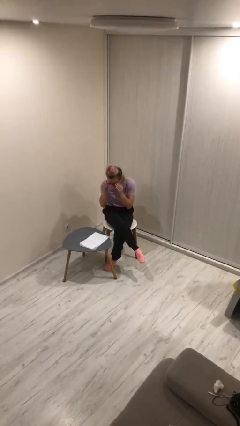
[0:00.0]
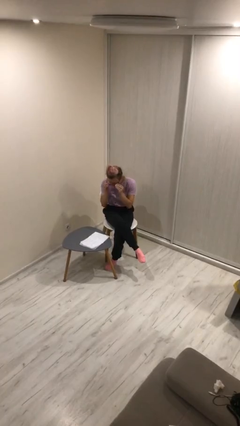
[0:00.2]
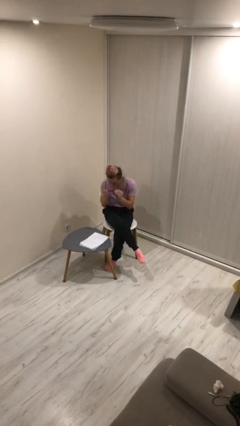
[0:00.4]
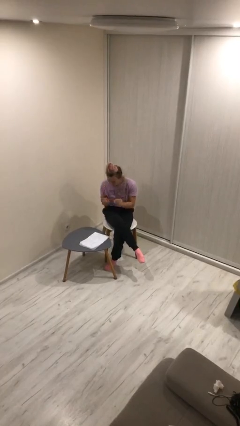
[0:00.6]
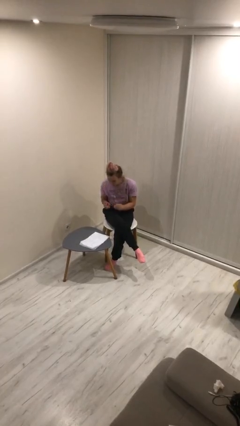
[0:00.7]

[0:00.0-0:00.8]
person takes off glasses

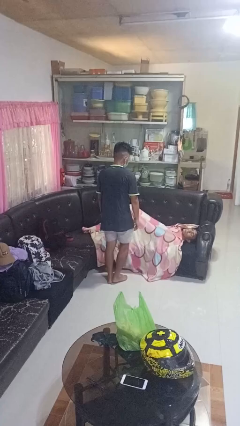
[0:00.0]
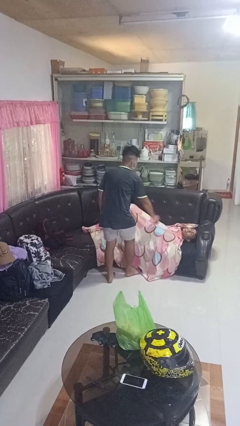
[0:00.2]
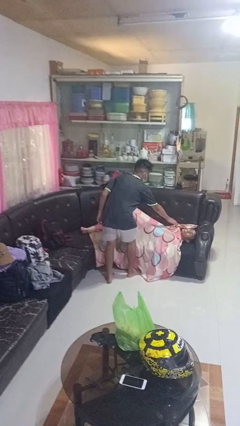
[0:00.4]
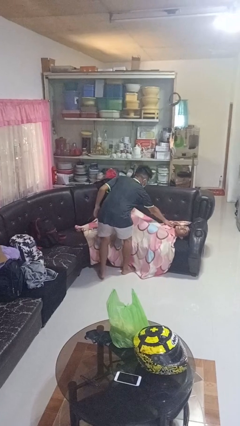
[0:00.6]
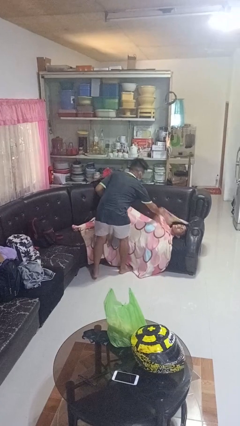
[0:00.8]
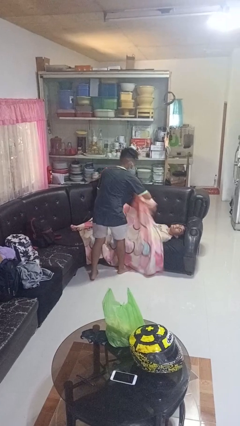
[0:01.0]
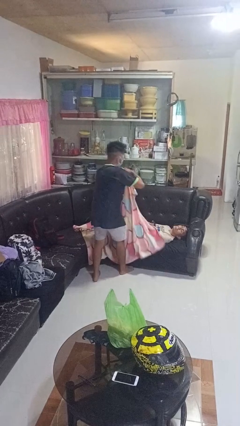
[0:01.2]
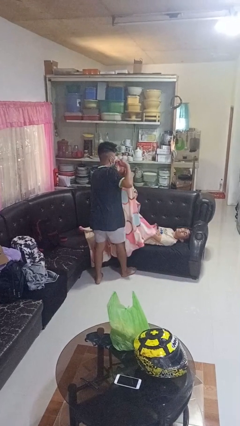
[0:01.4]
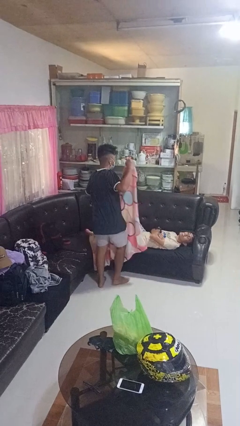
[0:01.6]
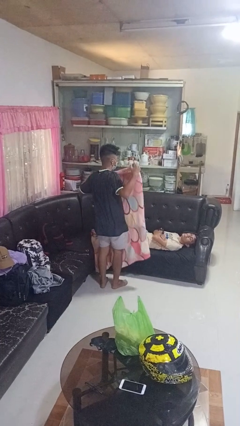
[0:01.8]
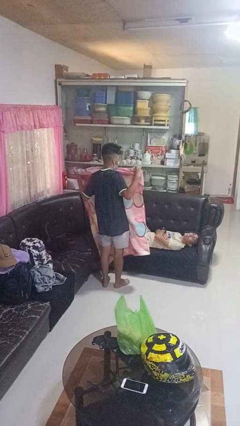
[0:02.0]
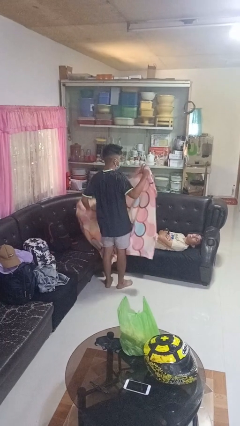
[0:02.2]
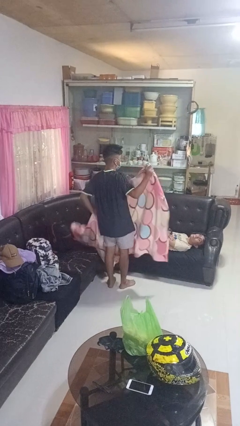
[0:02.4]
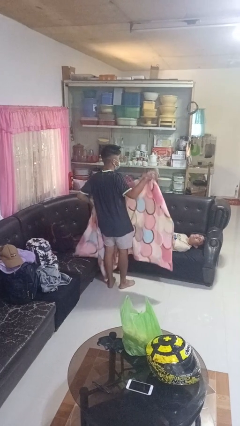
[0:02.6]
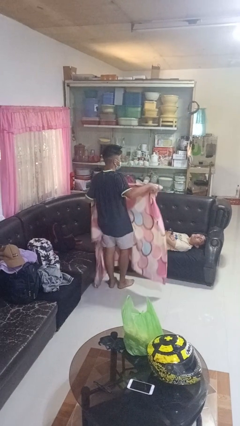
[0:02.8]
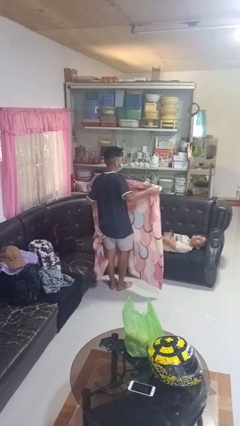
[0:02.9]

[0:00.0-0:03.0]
person uncovers friend with blanket

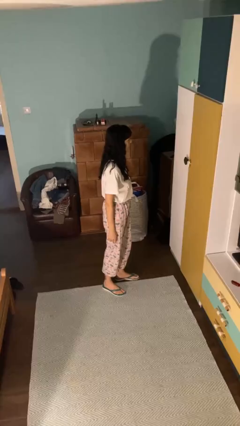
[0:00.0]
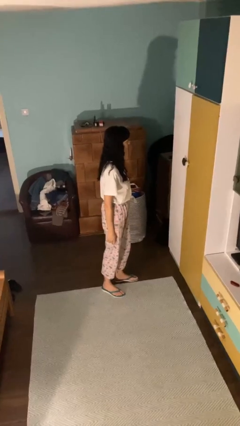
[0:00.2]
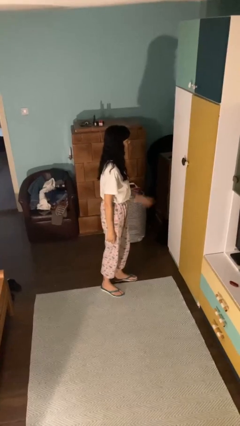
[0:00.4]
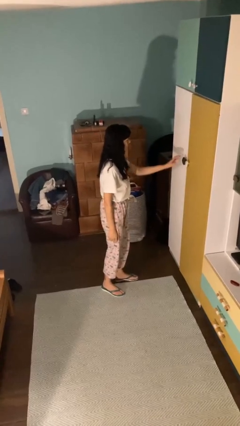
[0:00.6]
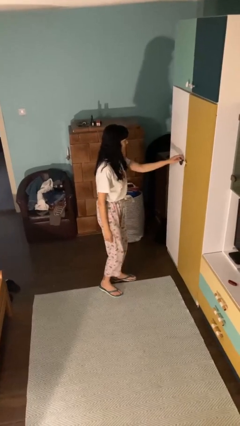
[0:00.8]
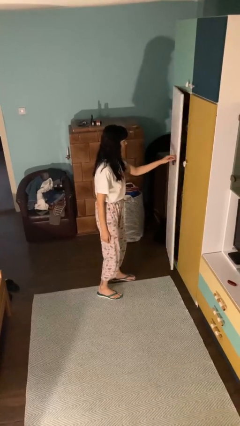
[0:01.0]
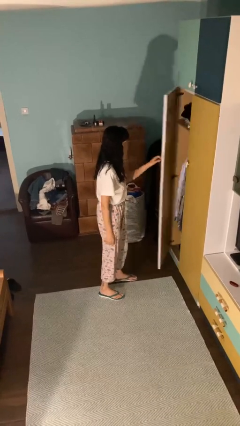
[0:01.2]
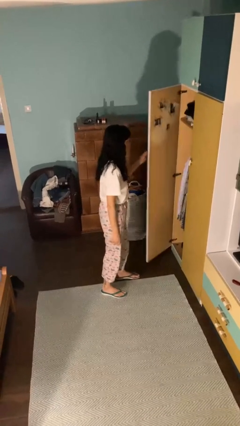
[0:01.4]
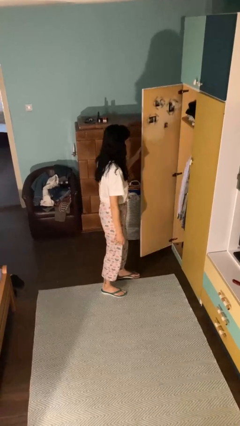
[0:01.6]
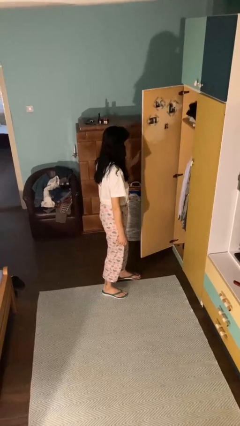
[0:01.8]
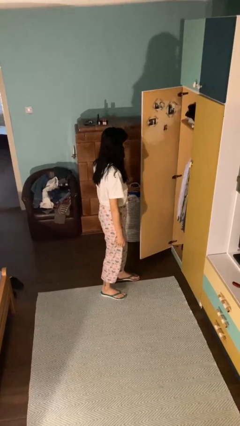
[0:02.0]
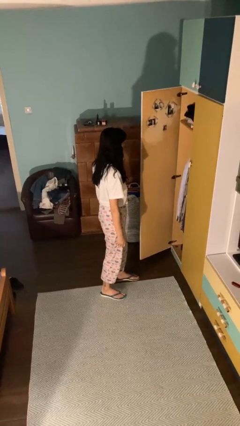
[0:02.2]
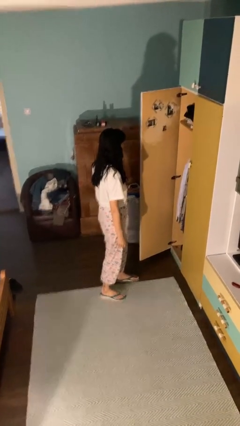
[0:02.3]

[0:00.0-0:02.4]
person opens closet door

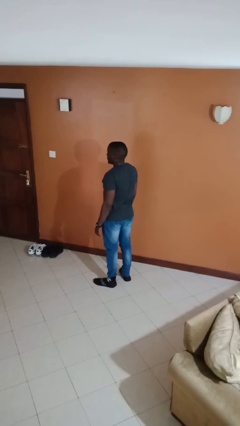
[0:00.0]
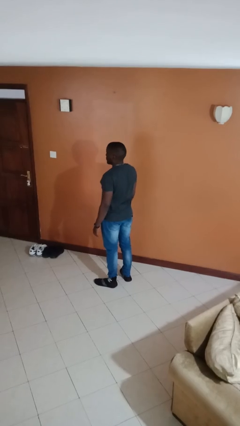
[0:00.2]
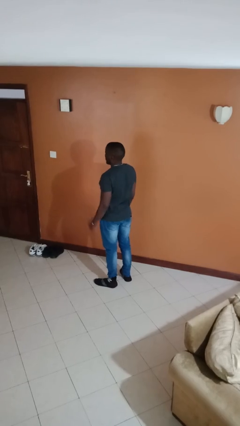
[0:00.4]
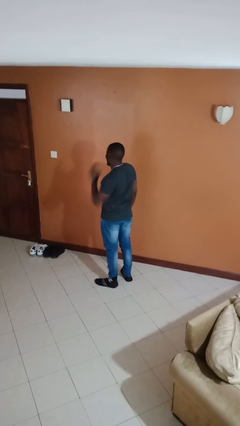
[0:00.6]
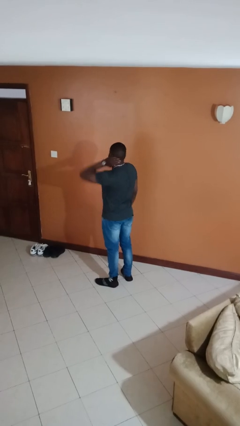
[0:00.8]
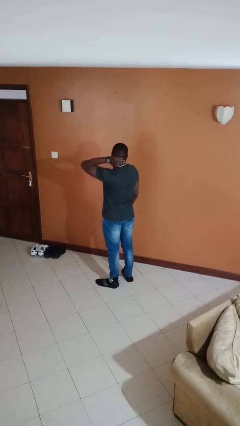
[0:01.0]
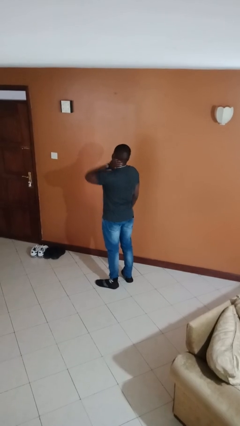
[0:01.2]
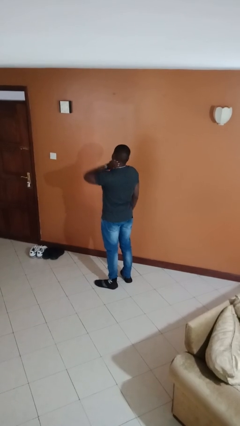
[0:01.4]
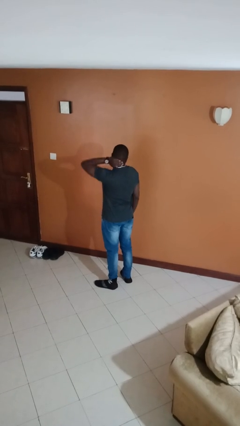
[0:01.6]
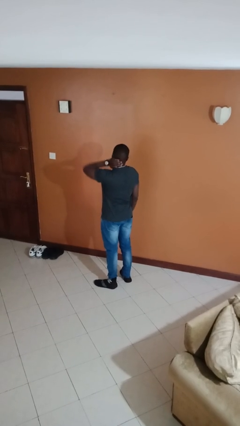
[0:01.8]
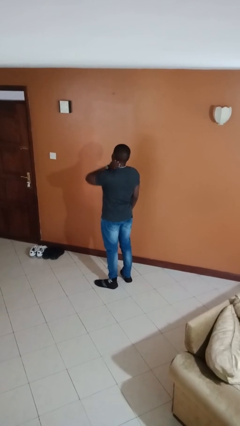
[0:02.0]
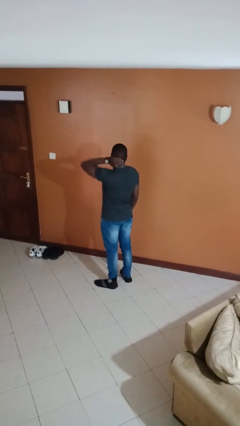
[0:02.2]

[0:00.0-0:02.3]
person rubs neck

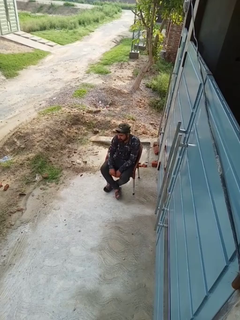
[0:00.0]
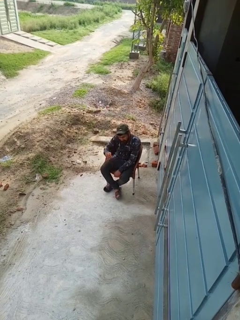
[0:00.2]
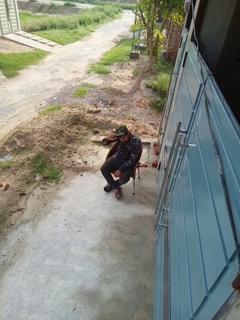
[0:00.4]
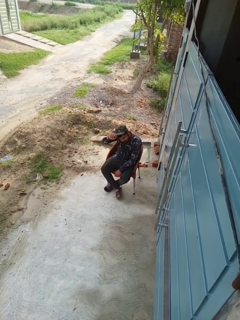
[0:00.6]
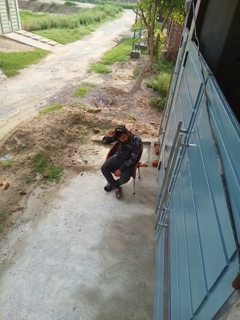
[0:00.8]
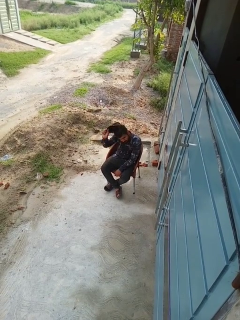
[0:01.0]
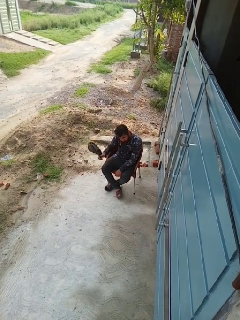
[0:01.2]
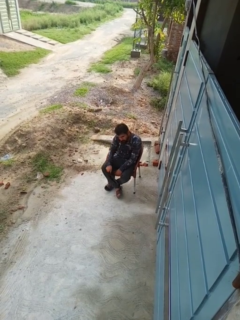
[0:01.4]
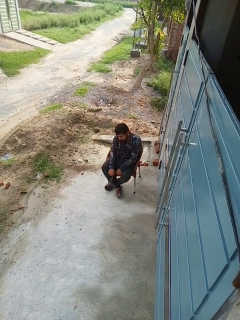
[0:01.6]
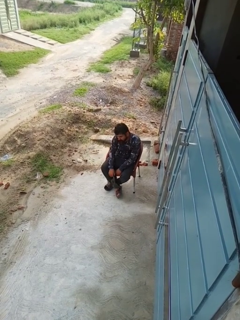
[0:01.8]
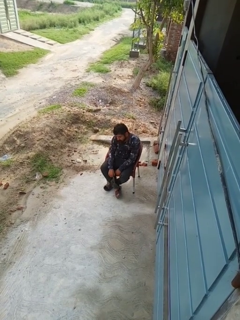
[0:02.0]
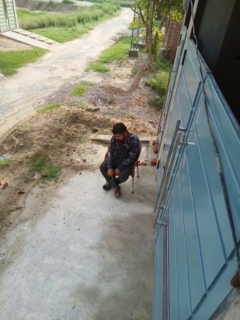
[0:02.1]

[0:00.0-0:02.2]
person takes off hat

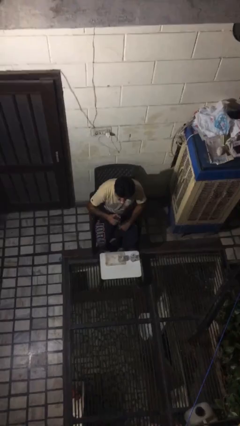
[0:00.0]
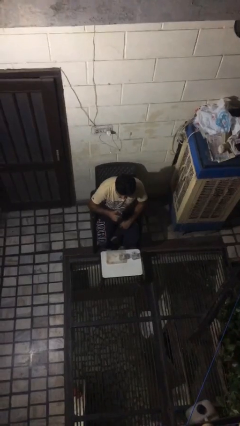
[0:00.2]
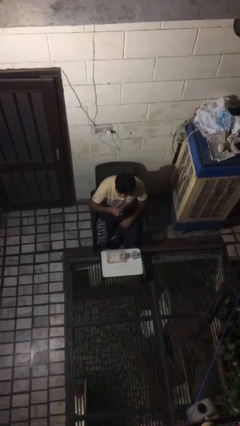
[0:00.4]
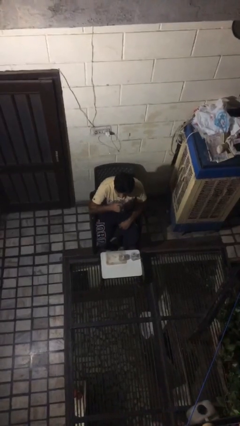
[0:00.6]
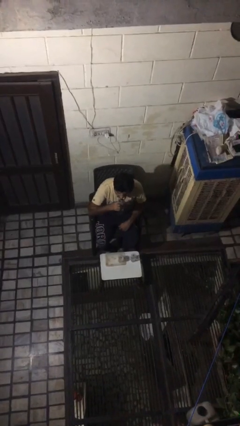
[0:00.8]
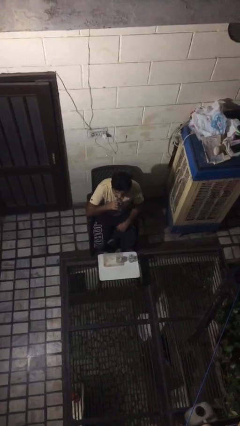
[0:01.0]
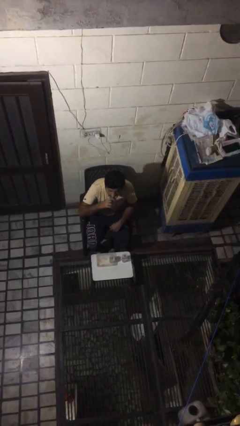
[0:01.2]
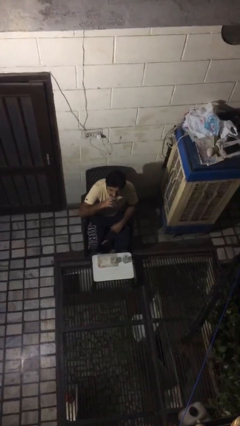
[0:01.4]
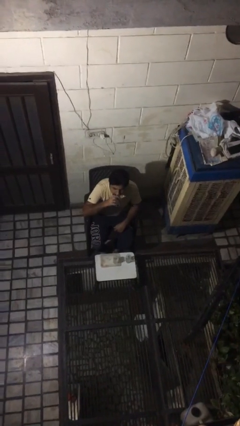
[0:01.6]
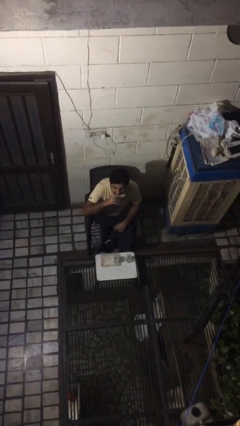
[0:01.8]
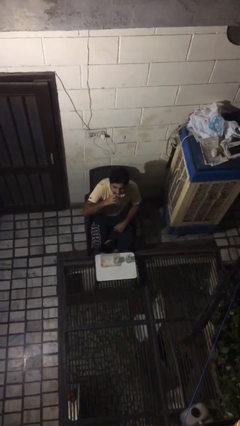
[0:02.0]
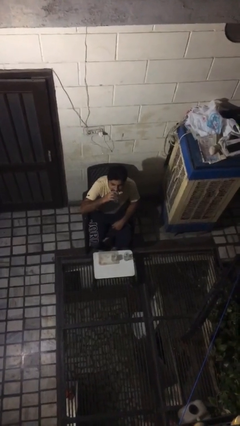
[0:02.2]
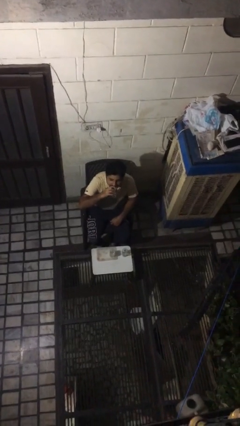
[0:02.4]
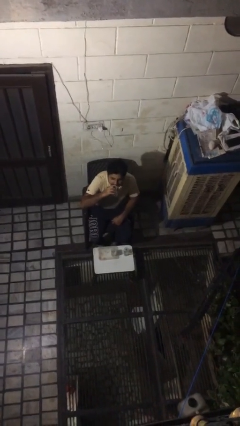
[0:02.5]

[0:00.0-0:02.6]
person drinks from shotglass

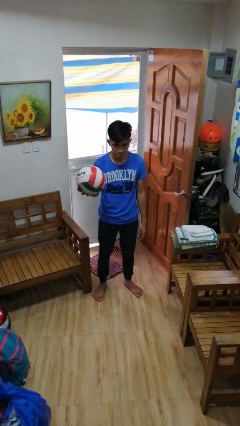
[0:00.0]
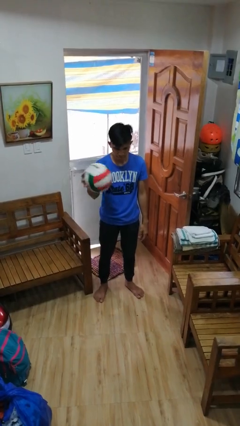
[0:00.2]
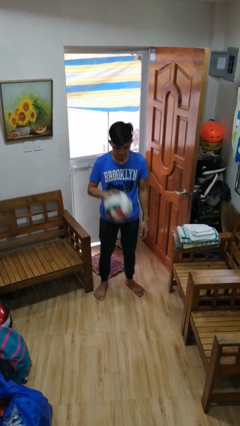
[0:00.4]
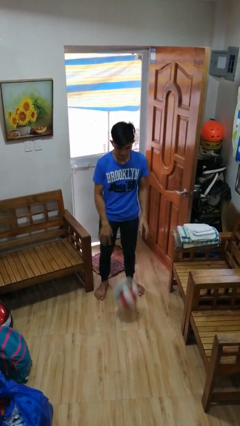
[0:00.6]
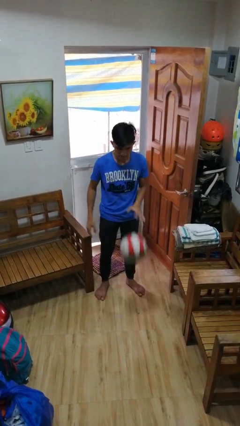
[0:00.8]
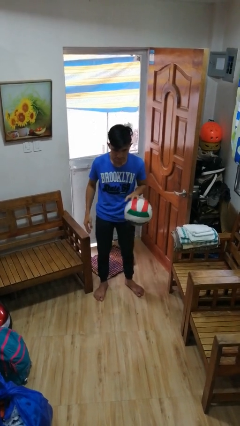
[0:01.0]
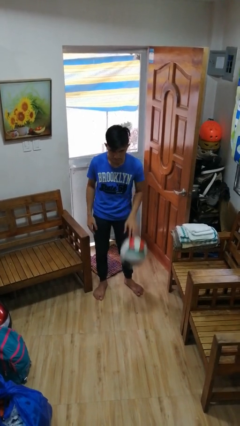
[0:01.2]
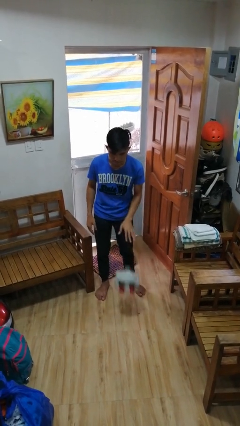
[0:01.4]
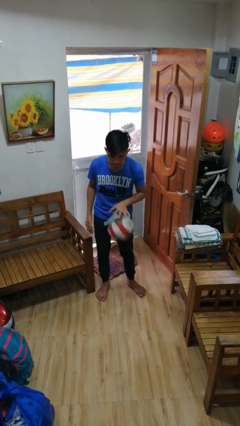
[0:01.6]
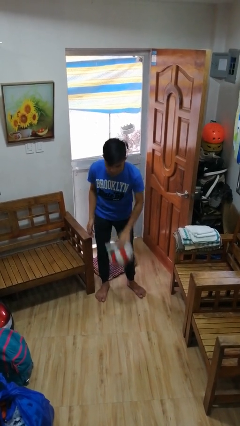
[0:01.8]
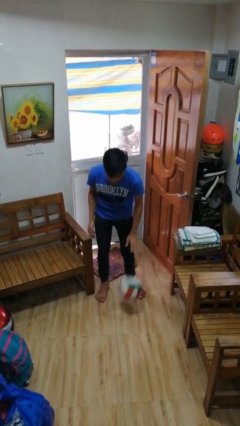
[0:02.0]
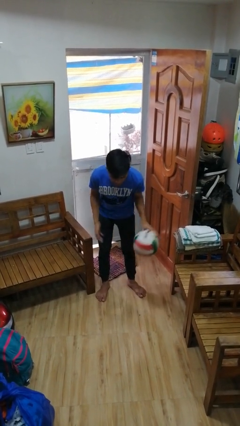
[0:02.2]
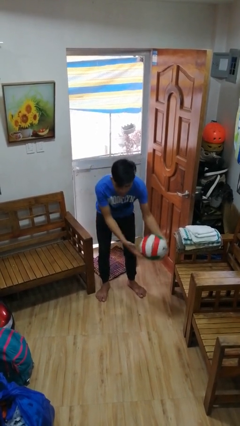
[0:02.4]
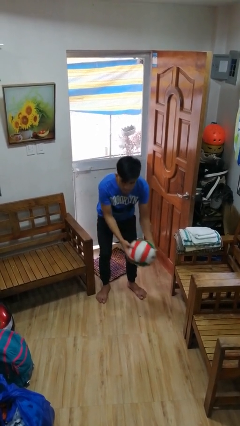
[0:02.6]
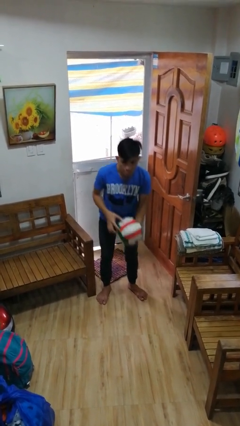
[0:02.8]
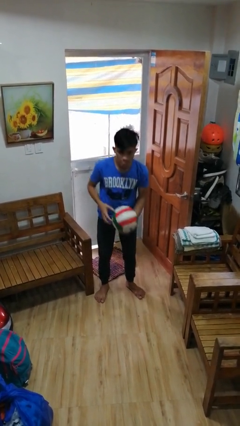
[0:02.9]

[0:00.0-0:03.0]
person bounces ball on floor

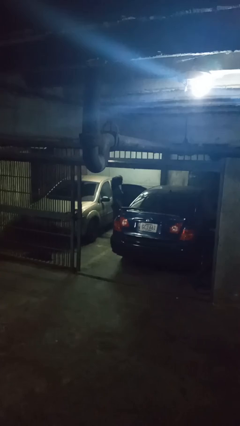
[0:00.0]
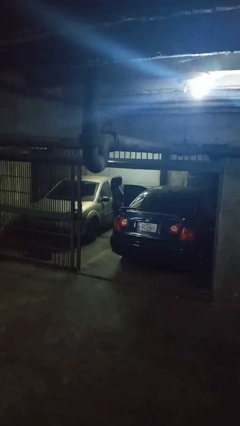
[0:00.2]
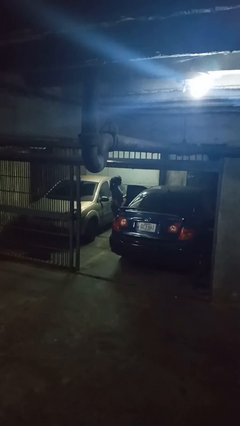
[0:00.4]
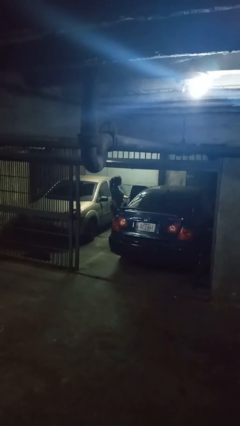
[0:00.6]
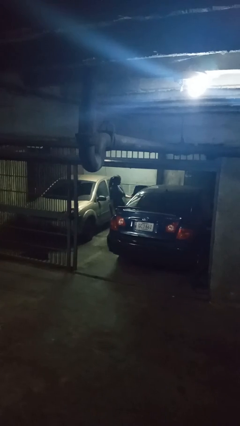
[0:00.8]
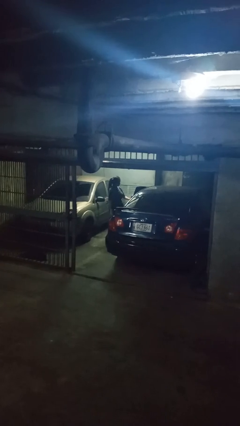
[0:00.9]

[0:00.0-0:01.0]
person closes car door
